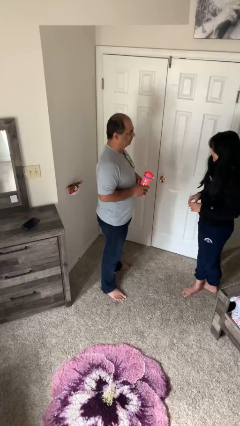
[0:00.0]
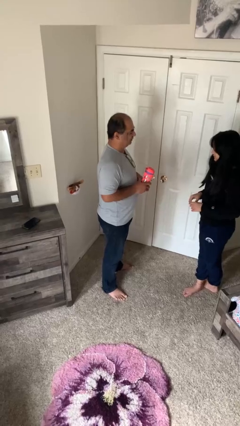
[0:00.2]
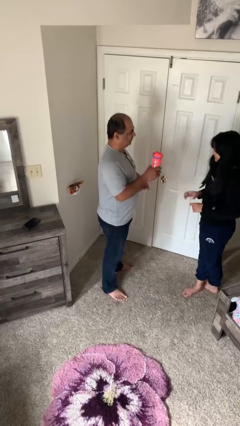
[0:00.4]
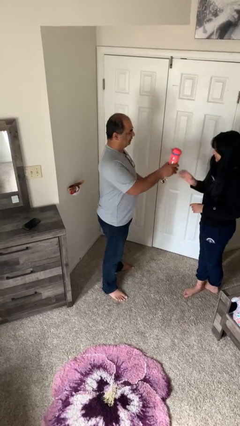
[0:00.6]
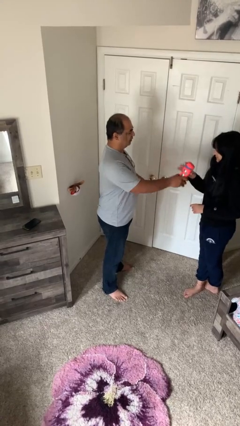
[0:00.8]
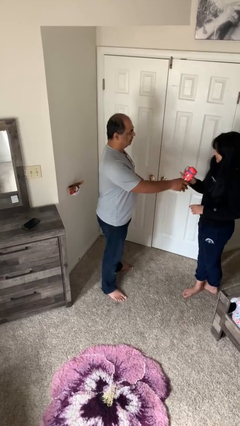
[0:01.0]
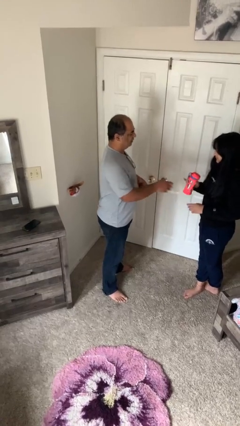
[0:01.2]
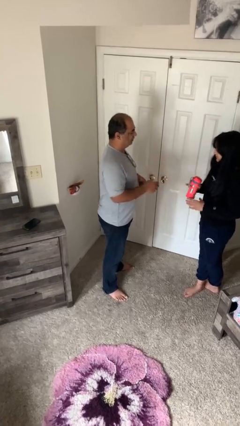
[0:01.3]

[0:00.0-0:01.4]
person transfers object to person

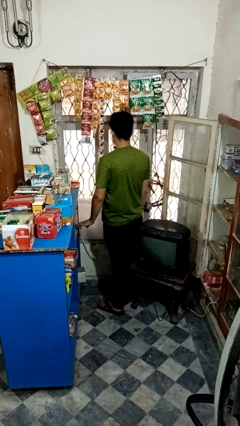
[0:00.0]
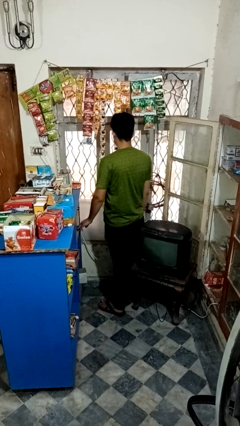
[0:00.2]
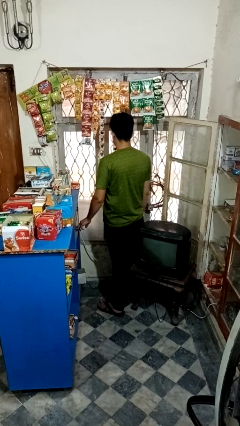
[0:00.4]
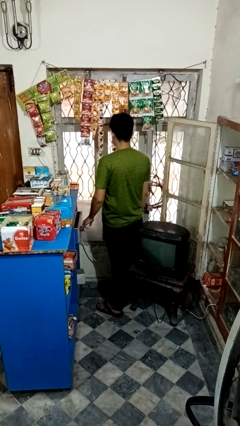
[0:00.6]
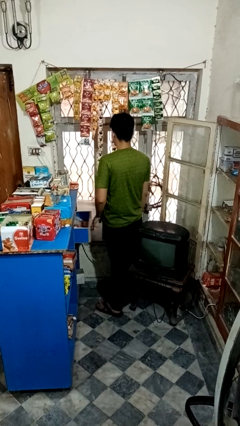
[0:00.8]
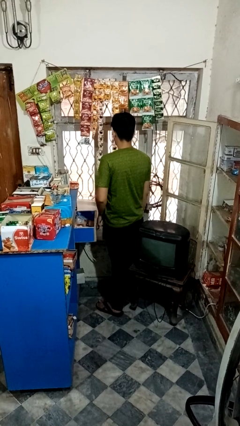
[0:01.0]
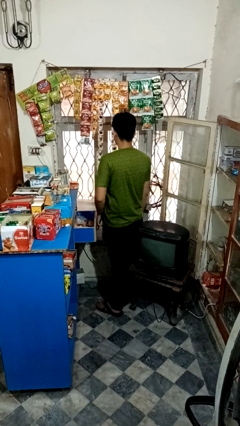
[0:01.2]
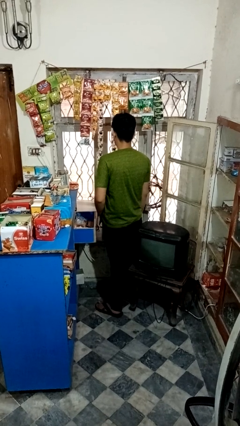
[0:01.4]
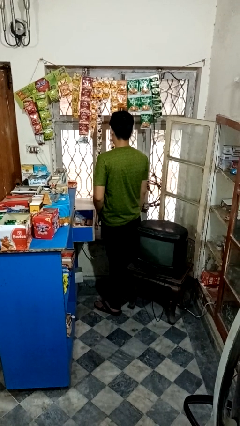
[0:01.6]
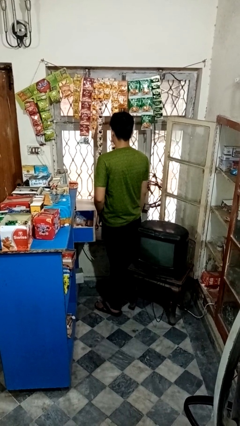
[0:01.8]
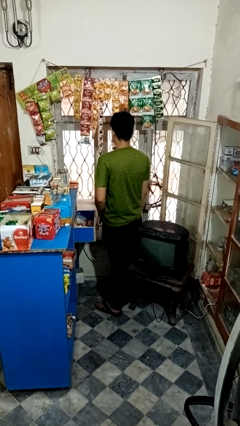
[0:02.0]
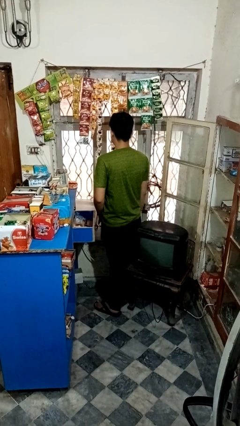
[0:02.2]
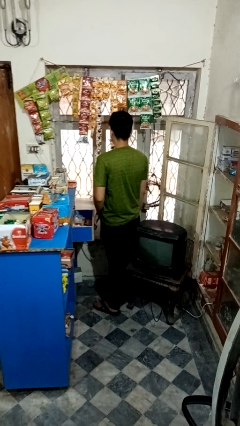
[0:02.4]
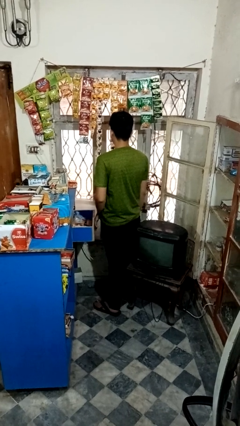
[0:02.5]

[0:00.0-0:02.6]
person opens kitchen drawer

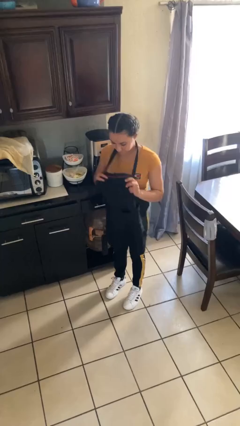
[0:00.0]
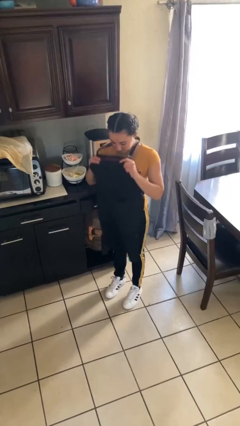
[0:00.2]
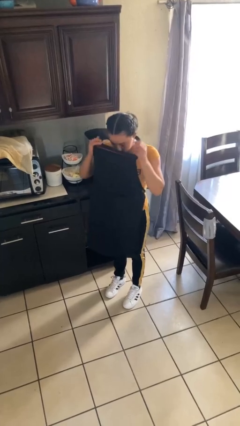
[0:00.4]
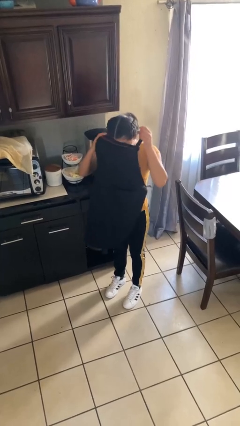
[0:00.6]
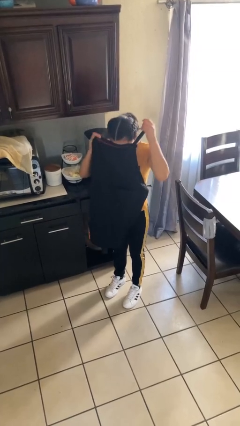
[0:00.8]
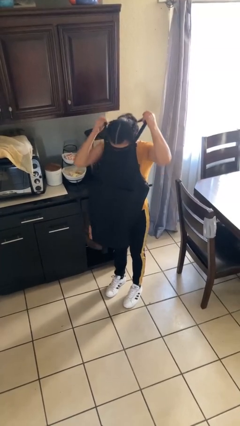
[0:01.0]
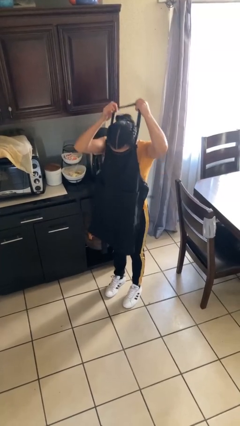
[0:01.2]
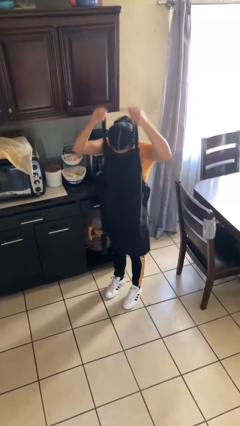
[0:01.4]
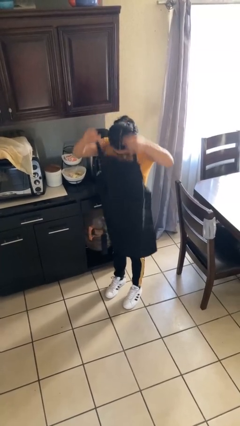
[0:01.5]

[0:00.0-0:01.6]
person takes off apron

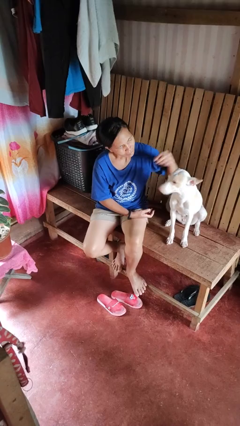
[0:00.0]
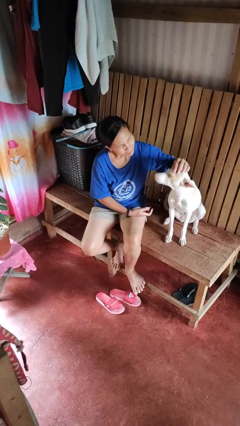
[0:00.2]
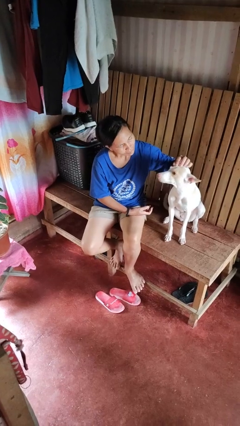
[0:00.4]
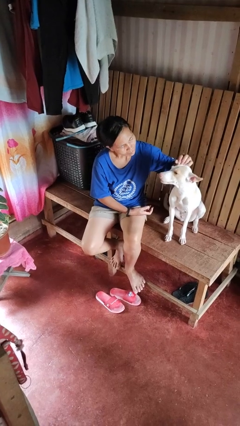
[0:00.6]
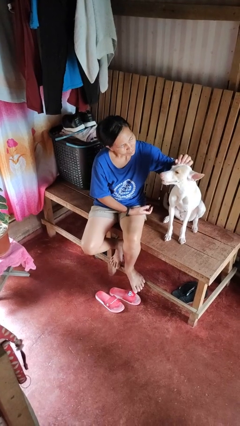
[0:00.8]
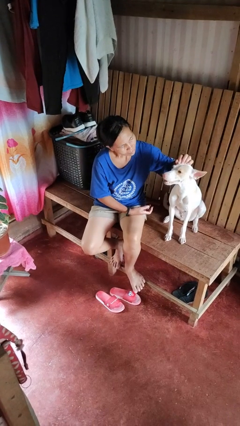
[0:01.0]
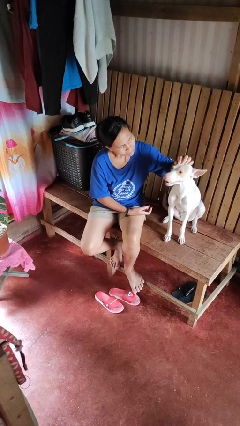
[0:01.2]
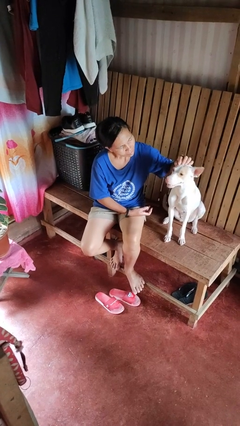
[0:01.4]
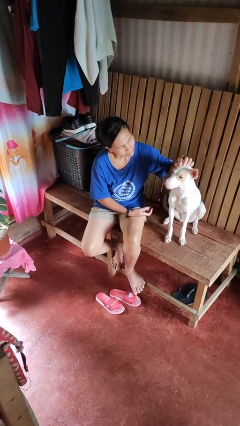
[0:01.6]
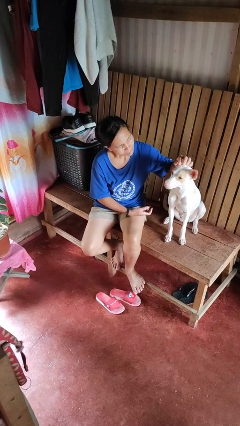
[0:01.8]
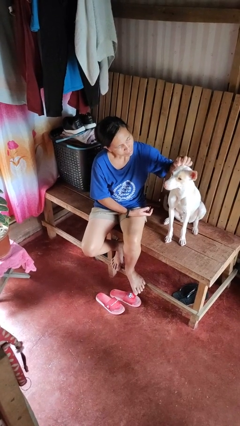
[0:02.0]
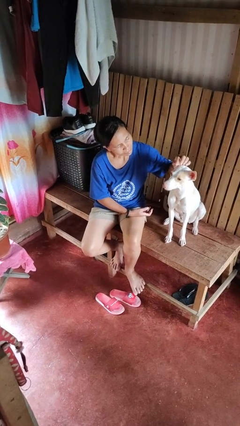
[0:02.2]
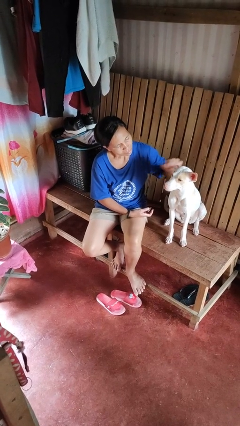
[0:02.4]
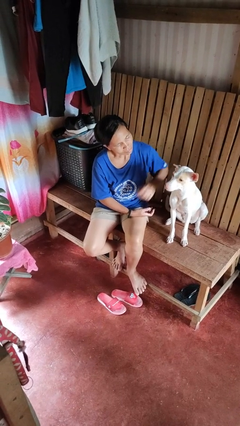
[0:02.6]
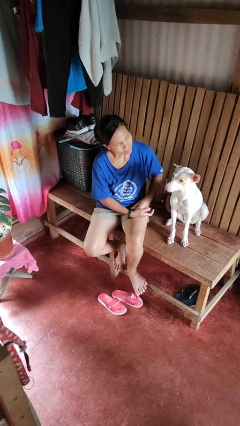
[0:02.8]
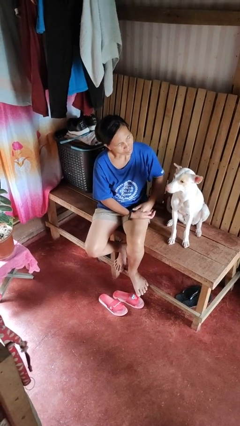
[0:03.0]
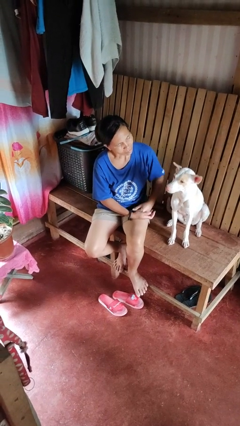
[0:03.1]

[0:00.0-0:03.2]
person pets dog

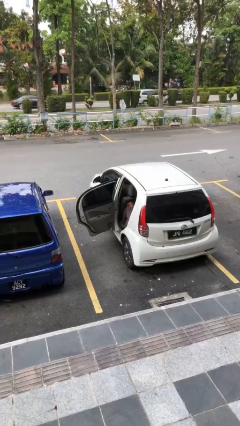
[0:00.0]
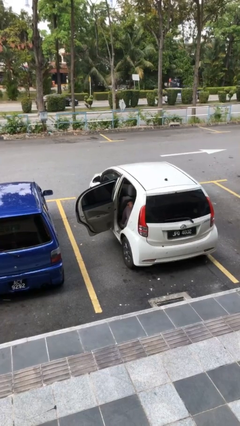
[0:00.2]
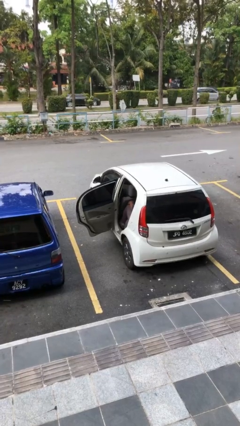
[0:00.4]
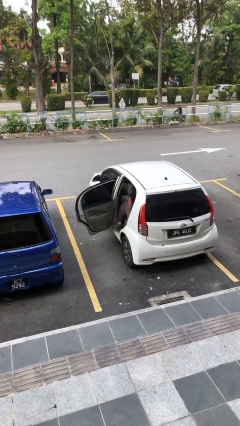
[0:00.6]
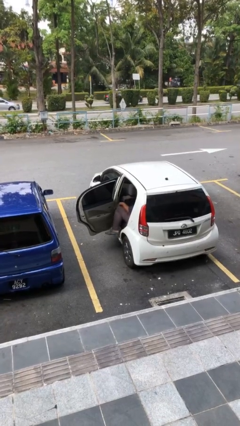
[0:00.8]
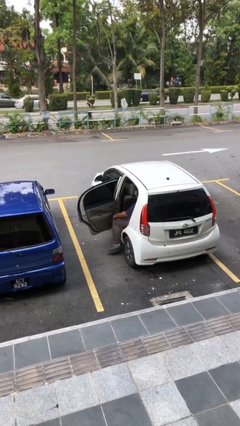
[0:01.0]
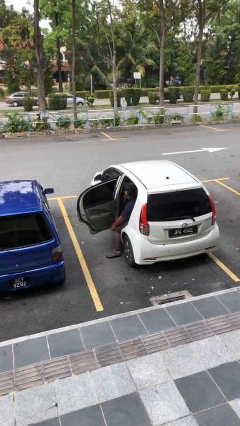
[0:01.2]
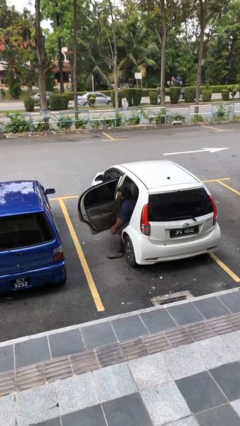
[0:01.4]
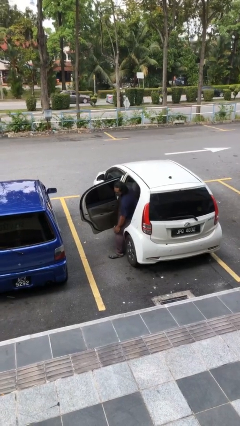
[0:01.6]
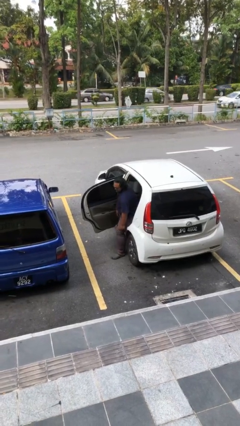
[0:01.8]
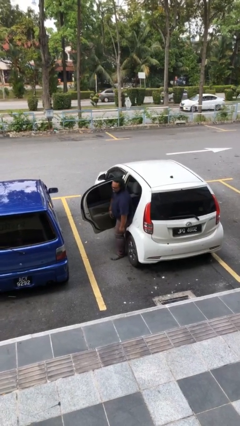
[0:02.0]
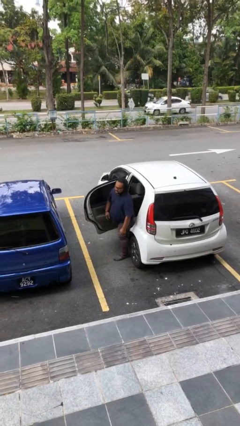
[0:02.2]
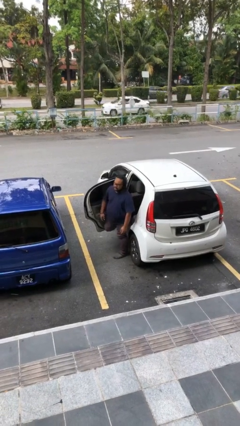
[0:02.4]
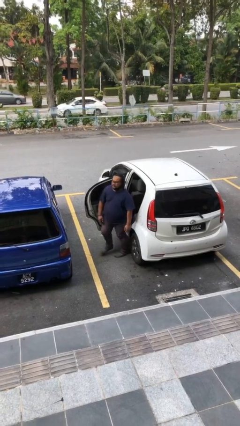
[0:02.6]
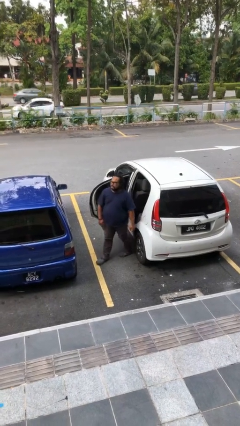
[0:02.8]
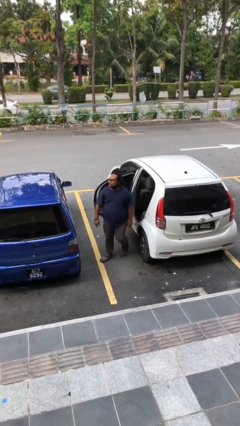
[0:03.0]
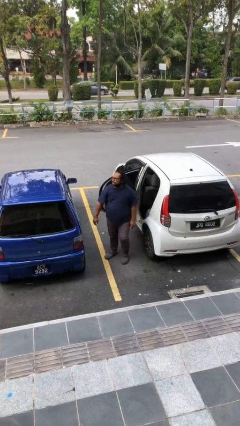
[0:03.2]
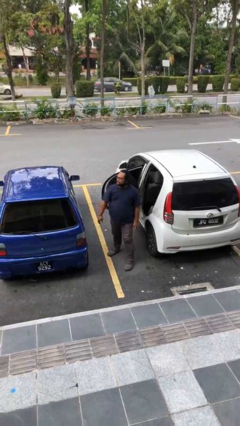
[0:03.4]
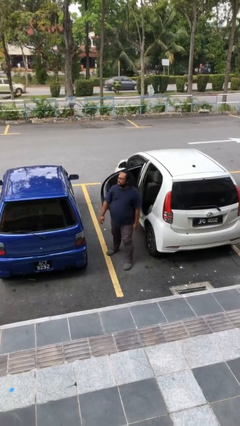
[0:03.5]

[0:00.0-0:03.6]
person exits car

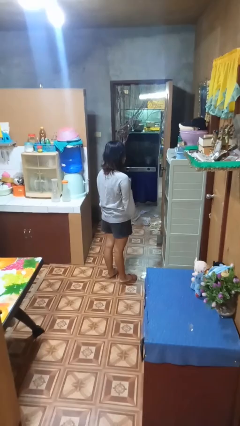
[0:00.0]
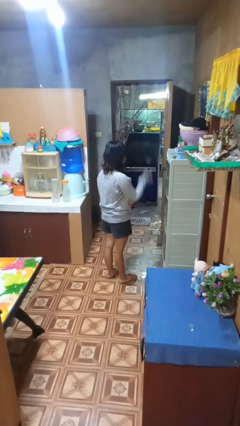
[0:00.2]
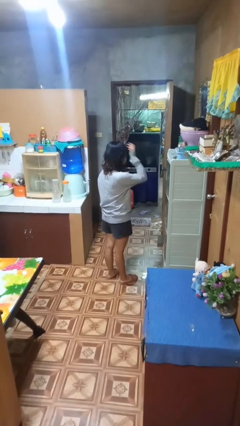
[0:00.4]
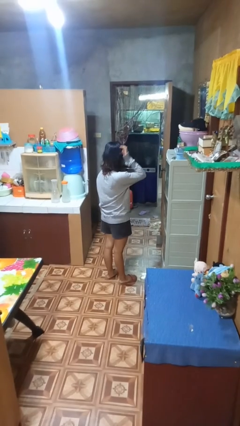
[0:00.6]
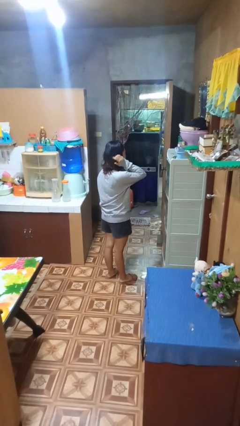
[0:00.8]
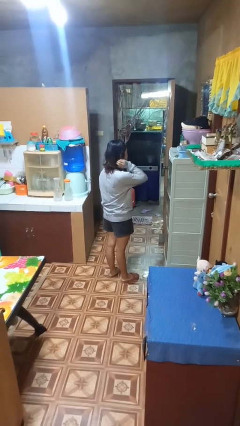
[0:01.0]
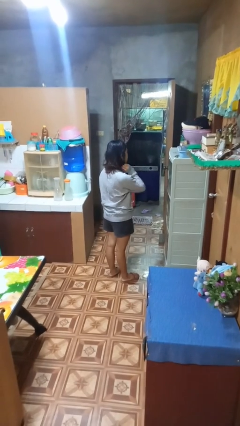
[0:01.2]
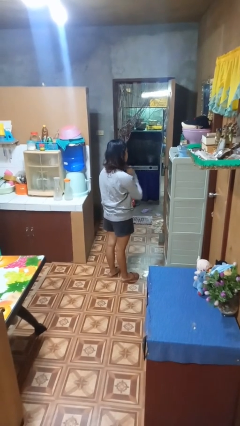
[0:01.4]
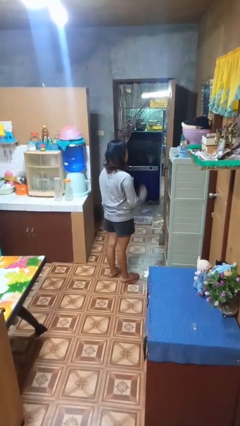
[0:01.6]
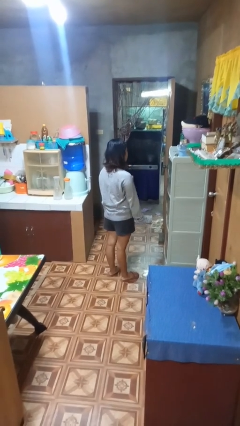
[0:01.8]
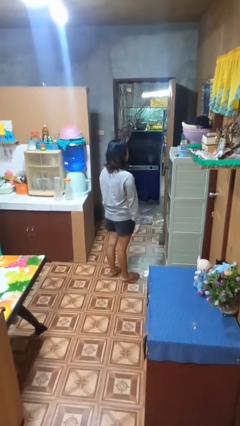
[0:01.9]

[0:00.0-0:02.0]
person strokes hair

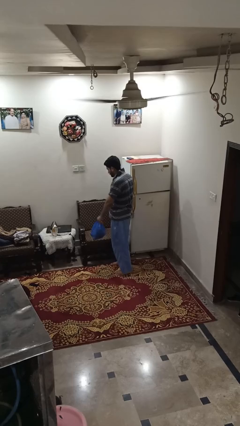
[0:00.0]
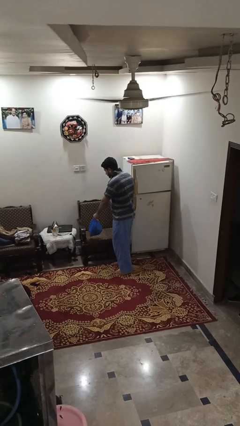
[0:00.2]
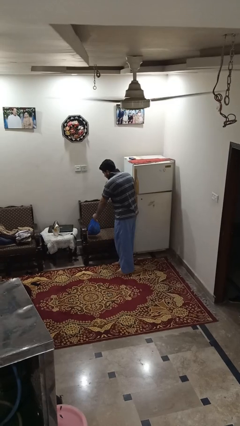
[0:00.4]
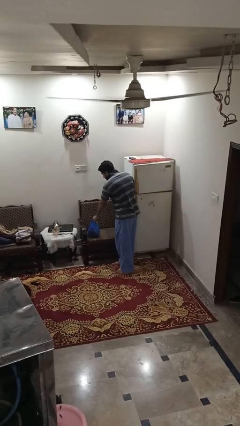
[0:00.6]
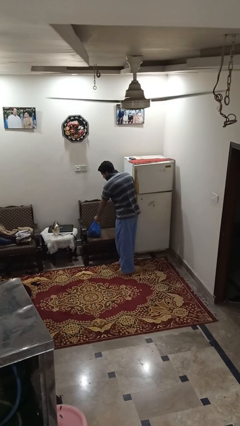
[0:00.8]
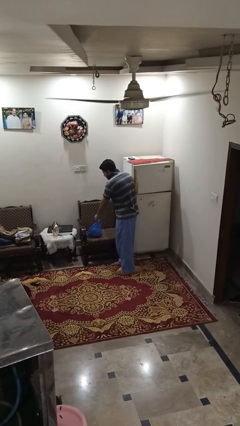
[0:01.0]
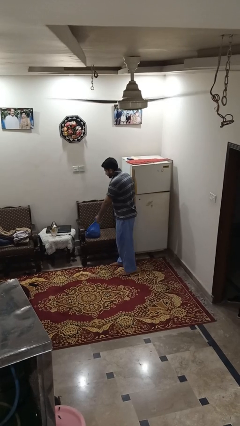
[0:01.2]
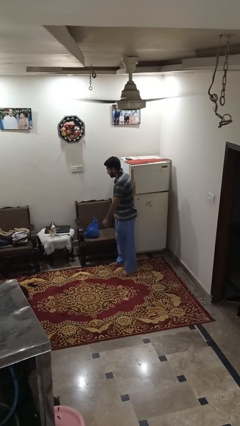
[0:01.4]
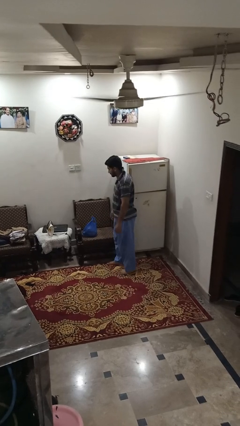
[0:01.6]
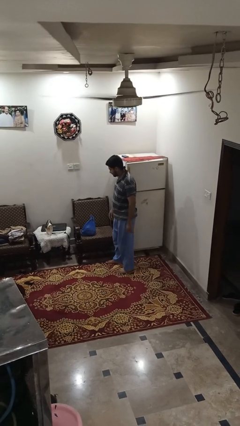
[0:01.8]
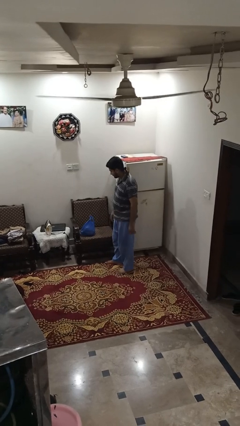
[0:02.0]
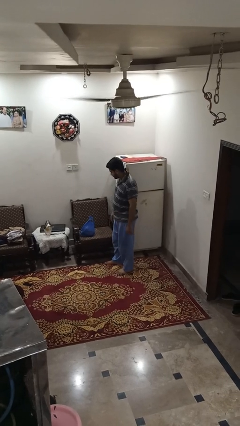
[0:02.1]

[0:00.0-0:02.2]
person puts down object on couch

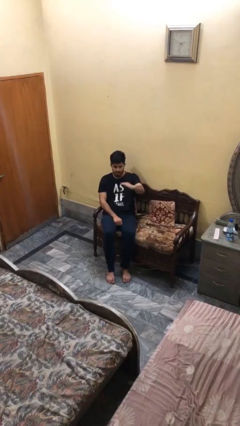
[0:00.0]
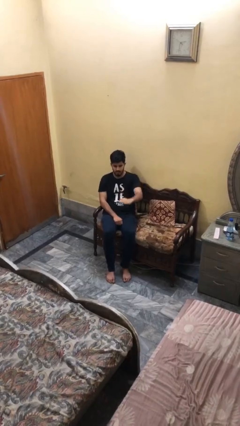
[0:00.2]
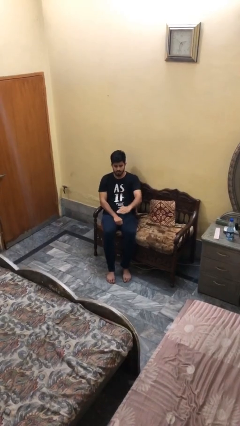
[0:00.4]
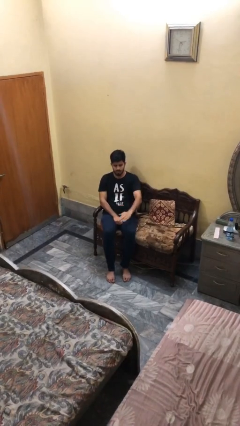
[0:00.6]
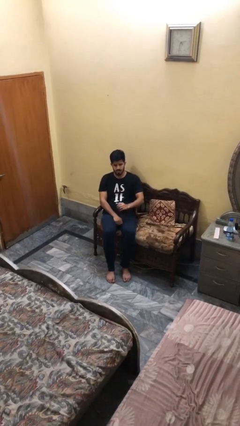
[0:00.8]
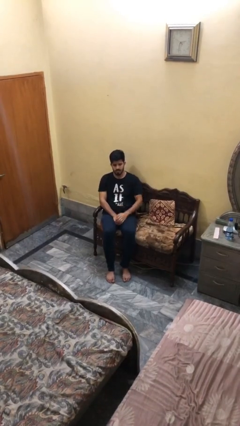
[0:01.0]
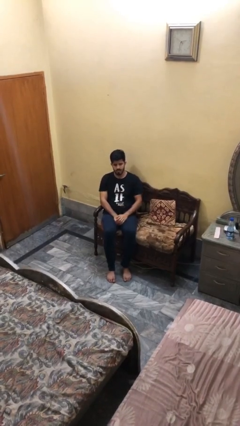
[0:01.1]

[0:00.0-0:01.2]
person gestures swipe down
